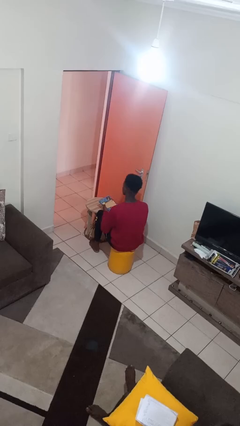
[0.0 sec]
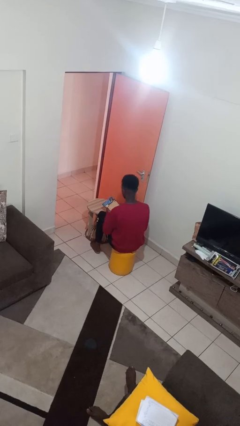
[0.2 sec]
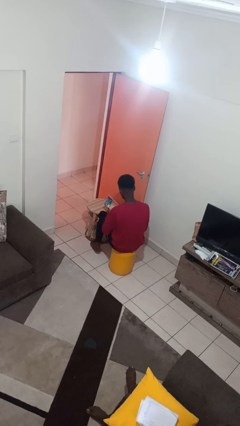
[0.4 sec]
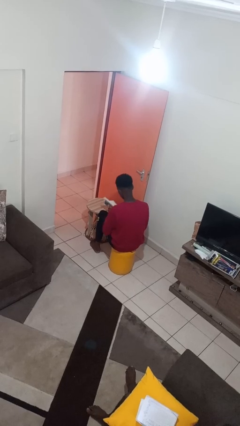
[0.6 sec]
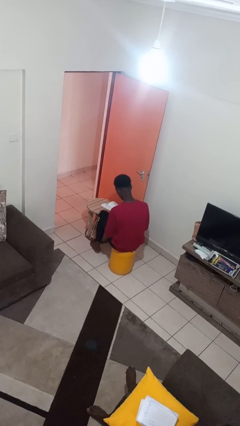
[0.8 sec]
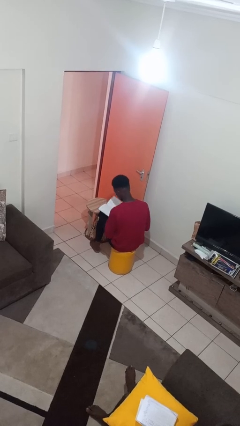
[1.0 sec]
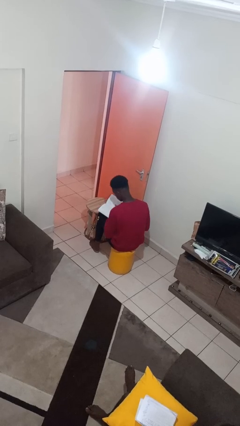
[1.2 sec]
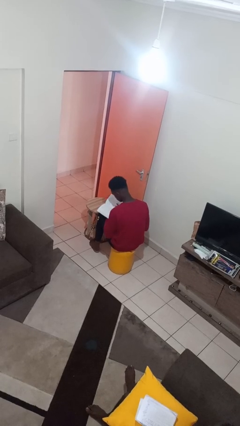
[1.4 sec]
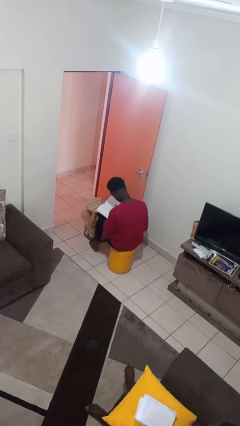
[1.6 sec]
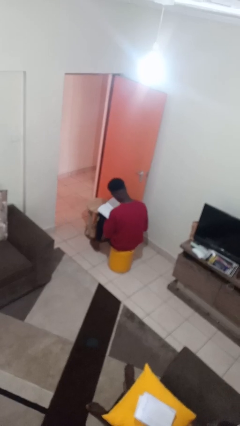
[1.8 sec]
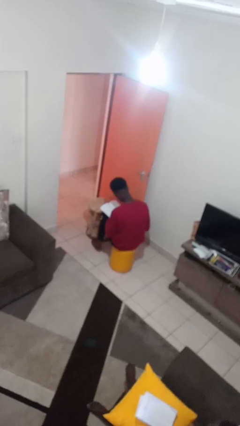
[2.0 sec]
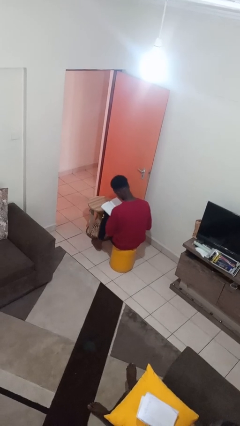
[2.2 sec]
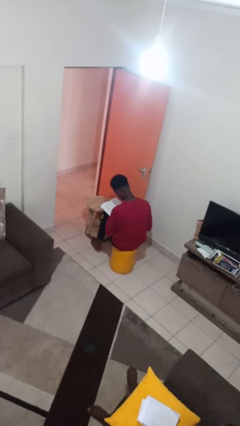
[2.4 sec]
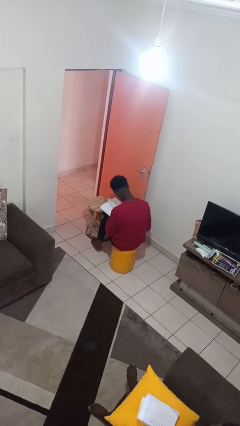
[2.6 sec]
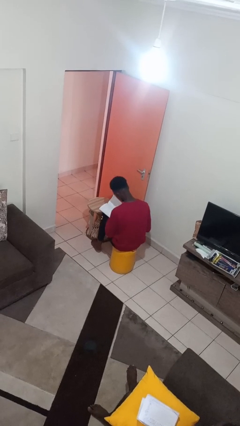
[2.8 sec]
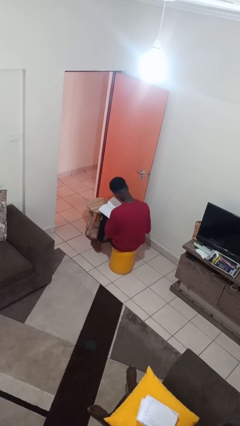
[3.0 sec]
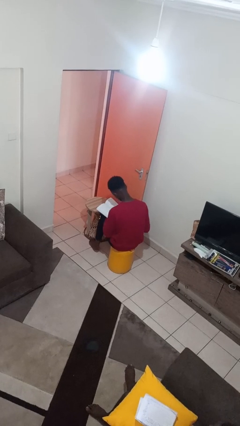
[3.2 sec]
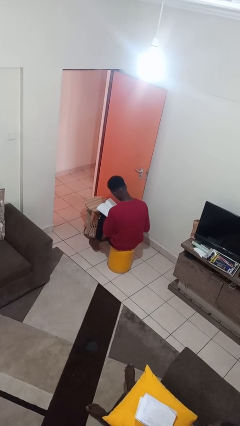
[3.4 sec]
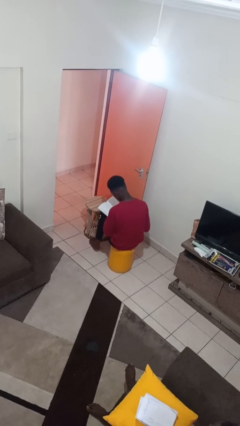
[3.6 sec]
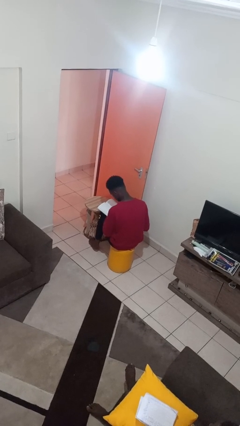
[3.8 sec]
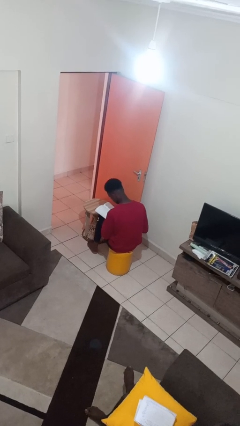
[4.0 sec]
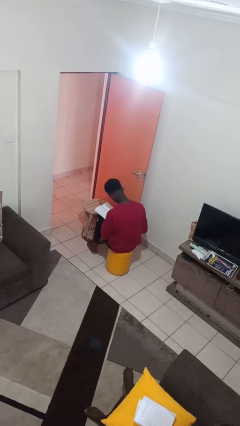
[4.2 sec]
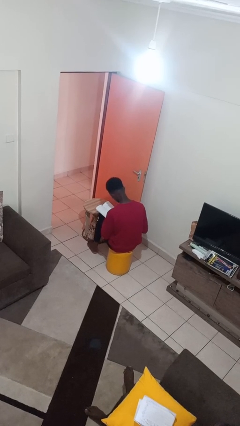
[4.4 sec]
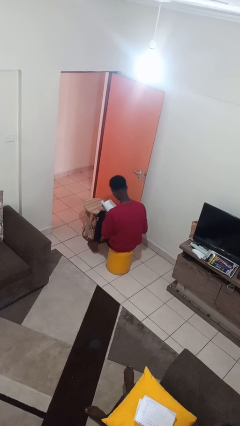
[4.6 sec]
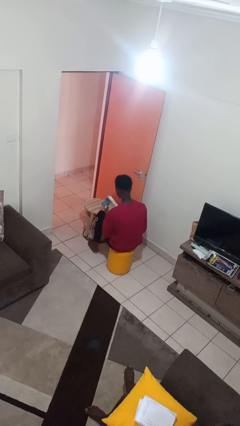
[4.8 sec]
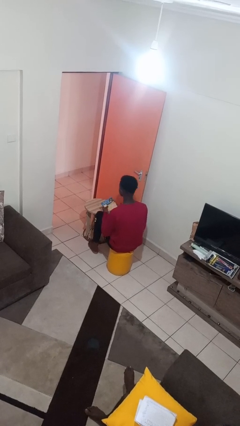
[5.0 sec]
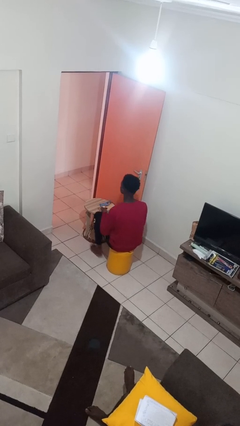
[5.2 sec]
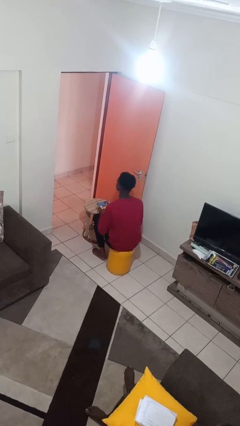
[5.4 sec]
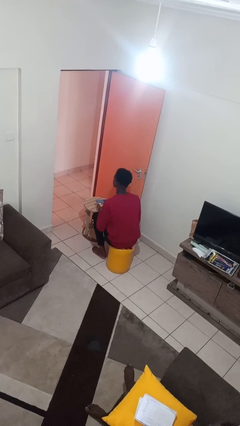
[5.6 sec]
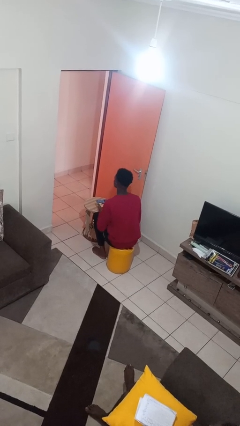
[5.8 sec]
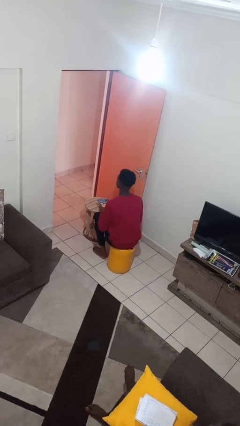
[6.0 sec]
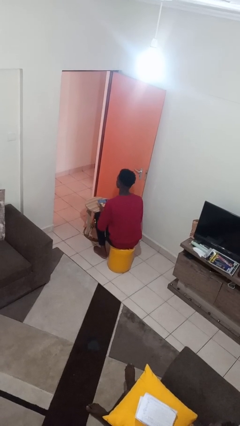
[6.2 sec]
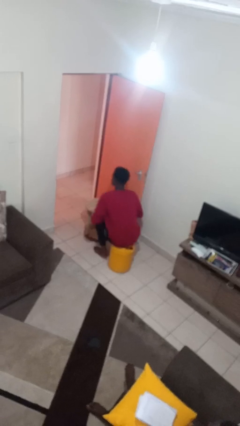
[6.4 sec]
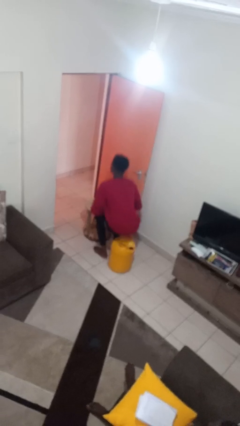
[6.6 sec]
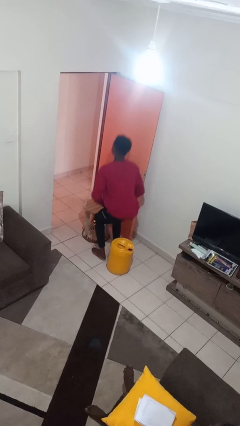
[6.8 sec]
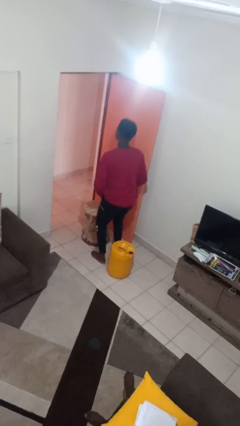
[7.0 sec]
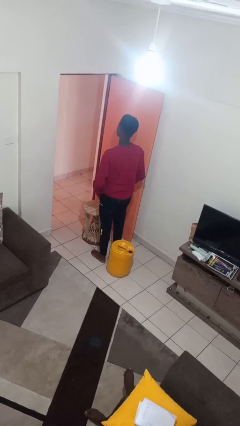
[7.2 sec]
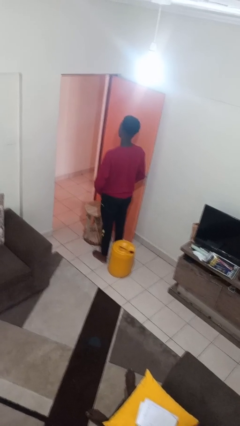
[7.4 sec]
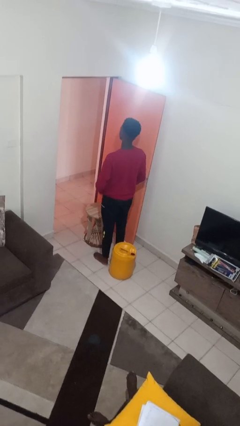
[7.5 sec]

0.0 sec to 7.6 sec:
person reads book

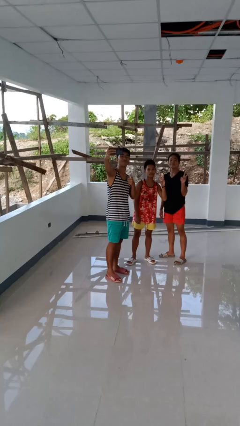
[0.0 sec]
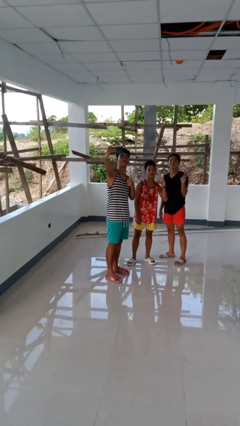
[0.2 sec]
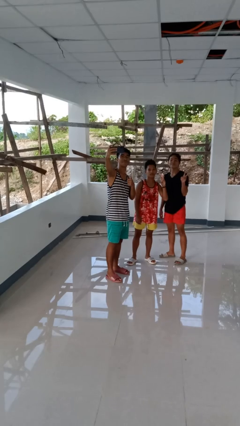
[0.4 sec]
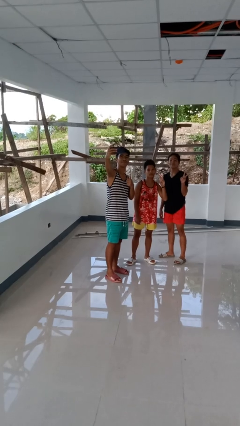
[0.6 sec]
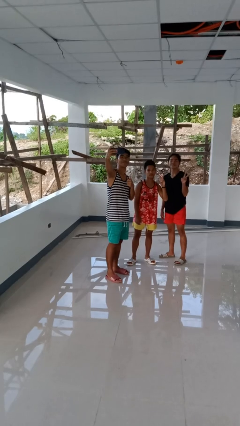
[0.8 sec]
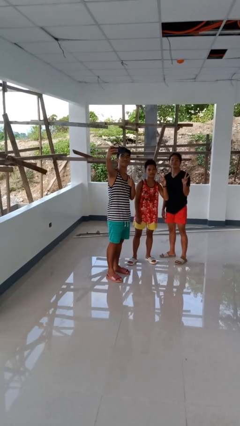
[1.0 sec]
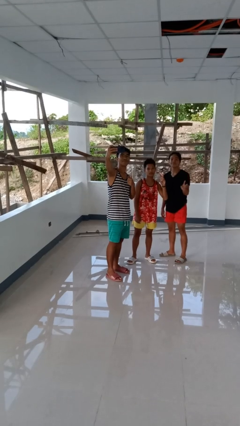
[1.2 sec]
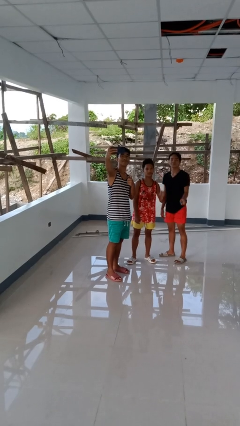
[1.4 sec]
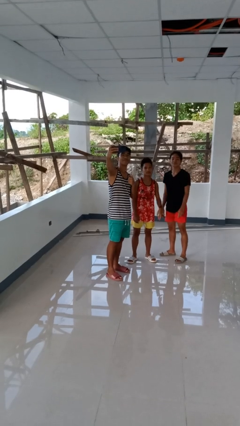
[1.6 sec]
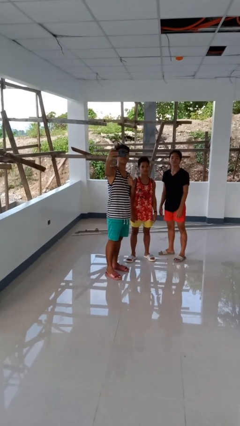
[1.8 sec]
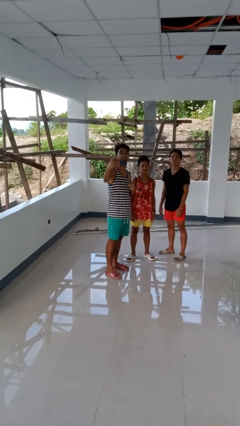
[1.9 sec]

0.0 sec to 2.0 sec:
person takes selfie with person

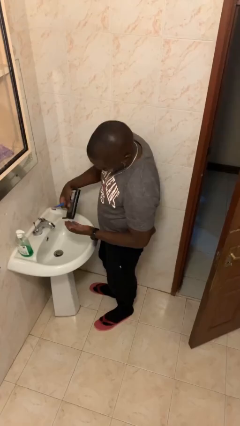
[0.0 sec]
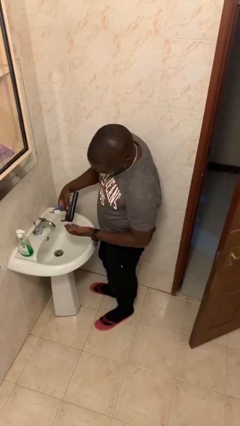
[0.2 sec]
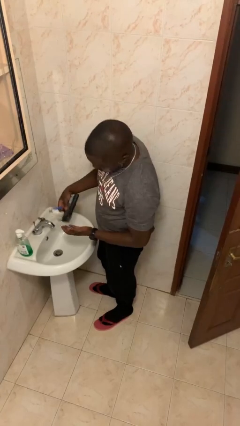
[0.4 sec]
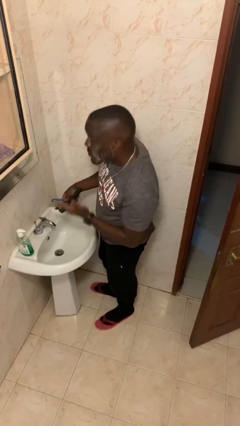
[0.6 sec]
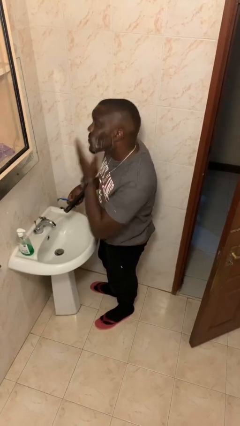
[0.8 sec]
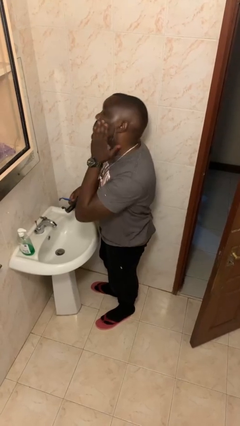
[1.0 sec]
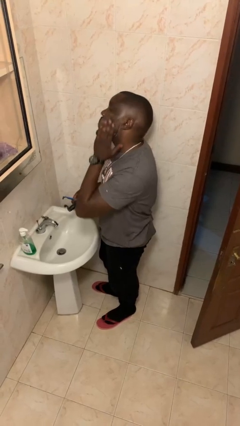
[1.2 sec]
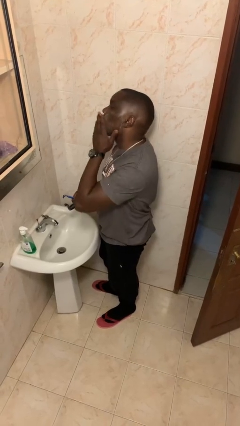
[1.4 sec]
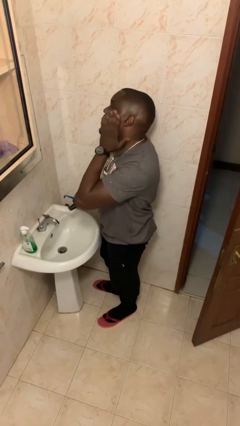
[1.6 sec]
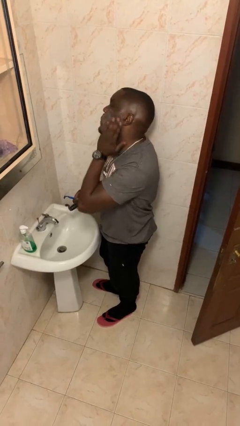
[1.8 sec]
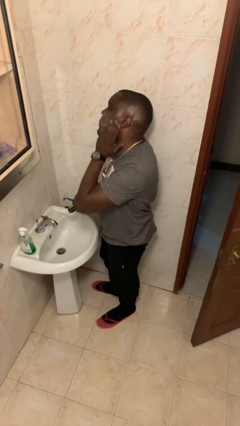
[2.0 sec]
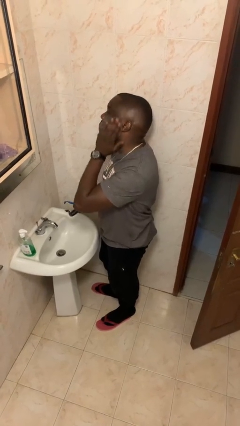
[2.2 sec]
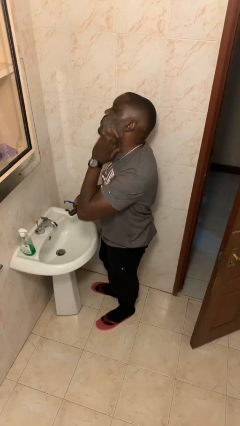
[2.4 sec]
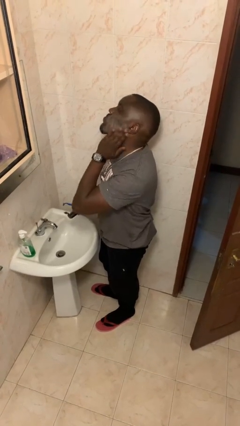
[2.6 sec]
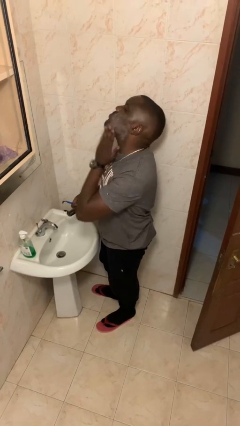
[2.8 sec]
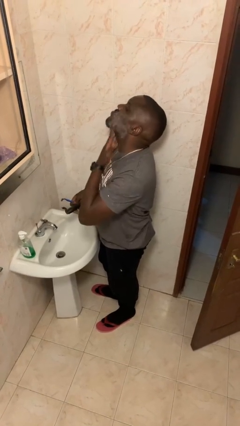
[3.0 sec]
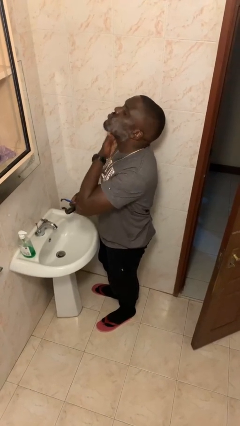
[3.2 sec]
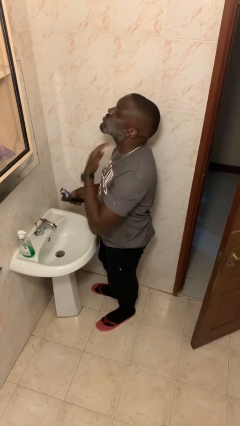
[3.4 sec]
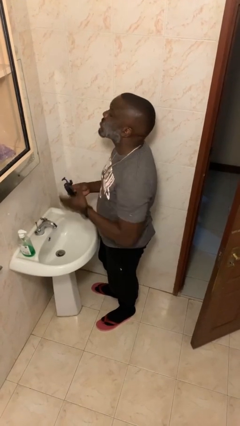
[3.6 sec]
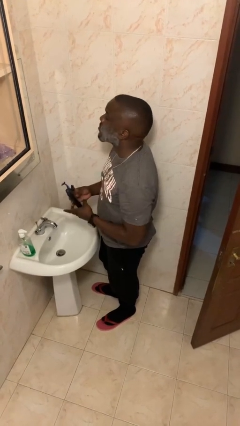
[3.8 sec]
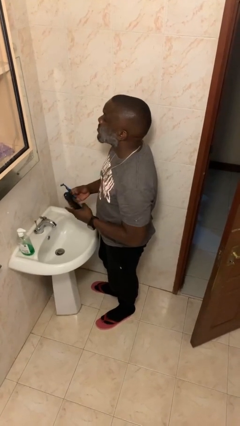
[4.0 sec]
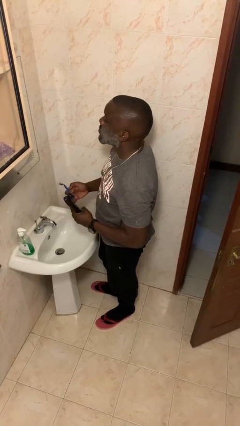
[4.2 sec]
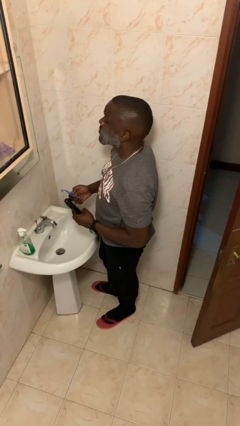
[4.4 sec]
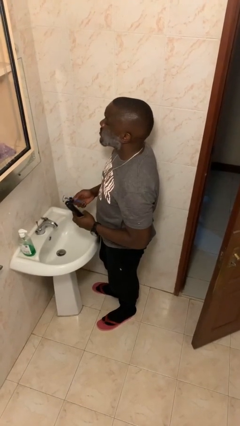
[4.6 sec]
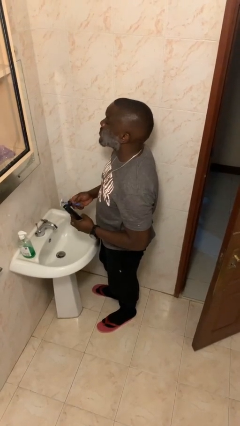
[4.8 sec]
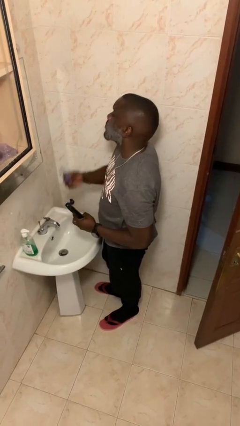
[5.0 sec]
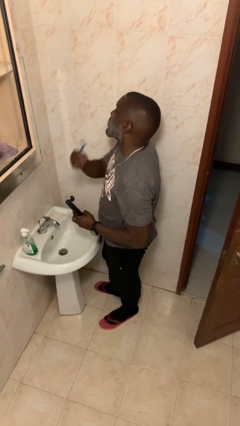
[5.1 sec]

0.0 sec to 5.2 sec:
person applies shaving cream

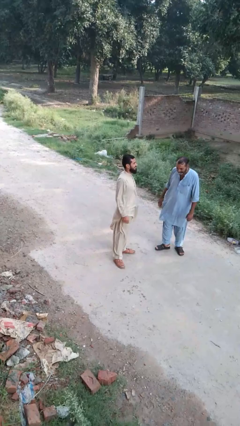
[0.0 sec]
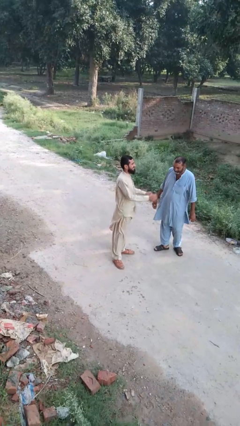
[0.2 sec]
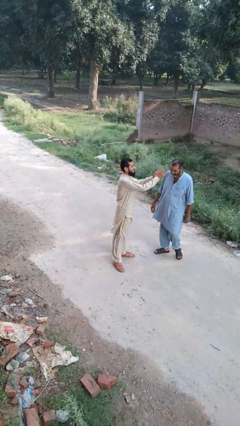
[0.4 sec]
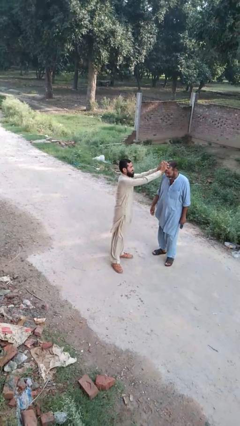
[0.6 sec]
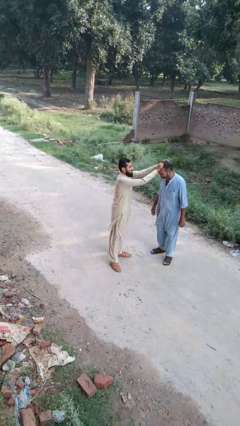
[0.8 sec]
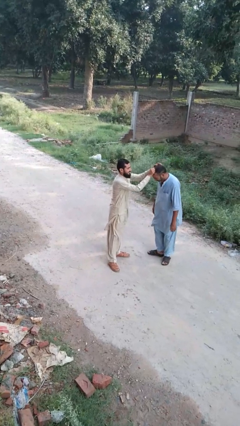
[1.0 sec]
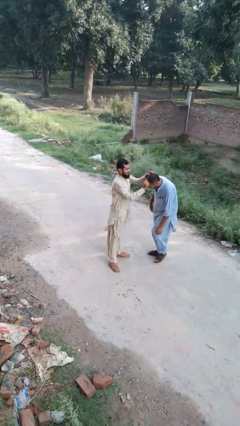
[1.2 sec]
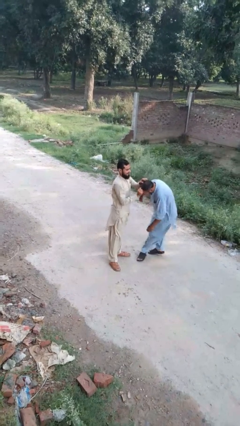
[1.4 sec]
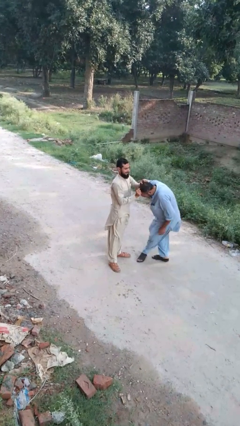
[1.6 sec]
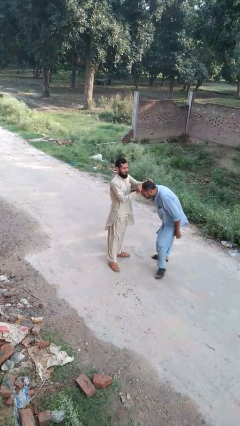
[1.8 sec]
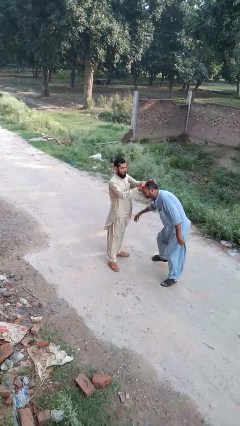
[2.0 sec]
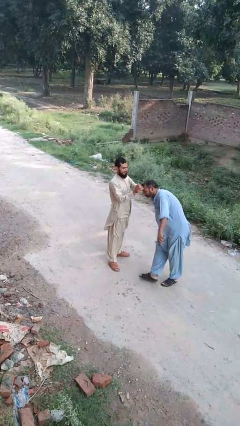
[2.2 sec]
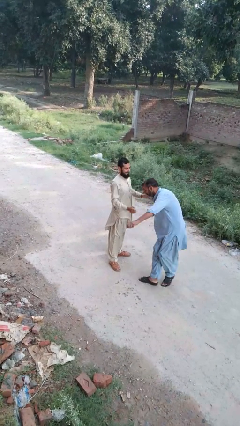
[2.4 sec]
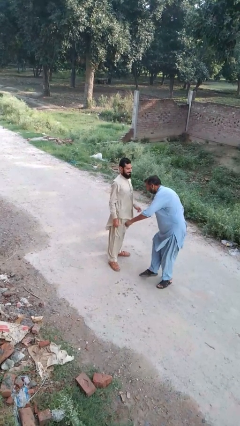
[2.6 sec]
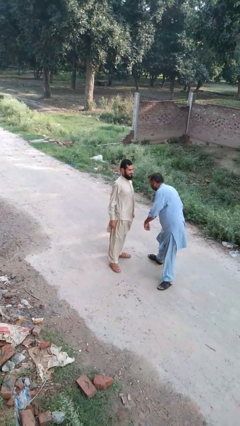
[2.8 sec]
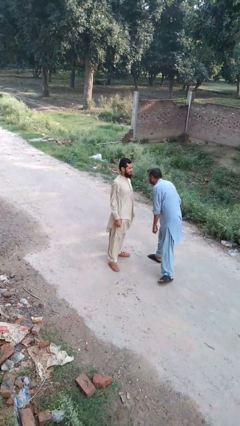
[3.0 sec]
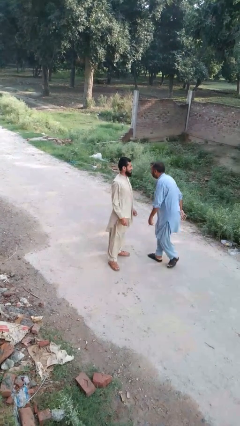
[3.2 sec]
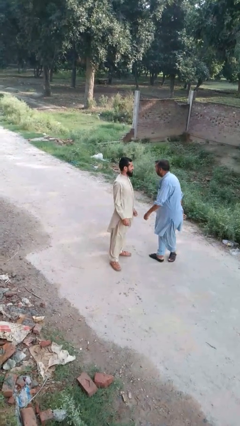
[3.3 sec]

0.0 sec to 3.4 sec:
person grabs person by hair
